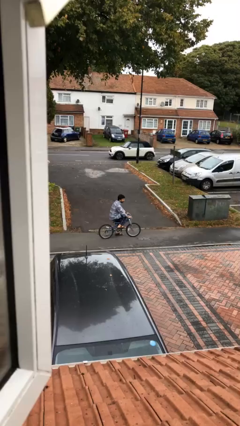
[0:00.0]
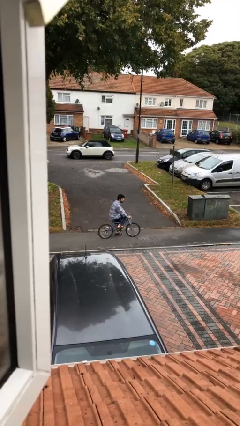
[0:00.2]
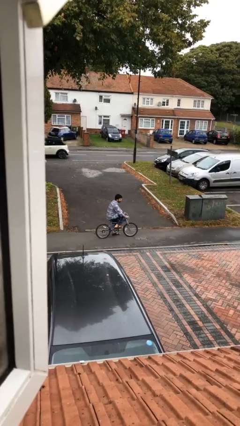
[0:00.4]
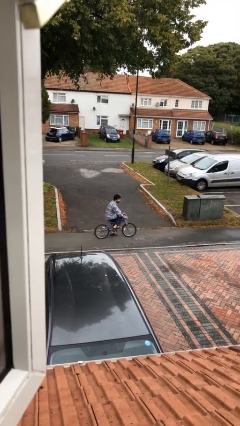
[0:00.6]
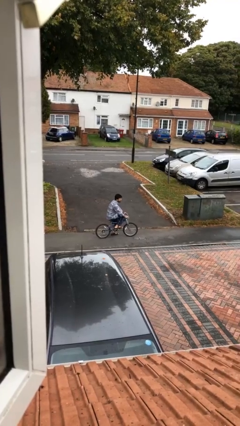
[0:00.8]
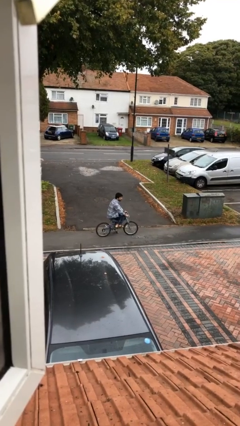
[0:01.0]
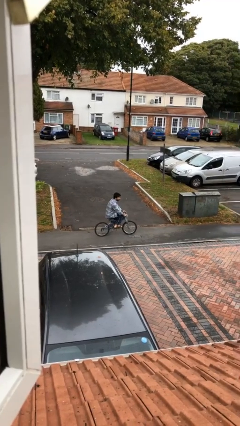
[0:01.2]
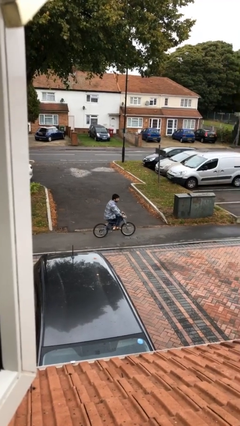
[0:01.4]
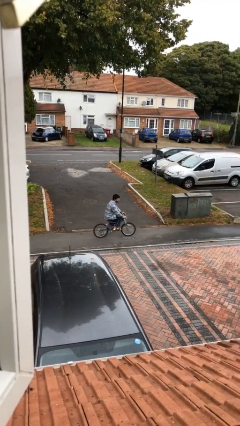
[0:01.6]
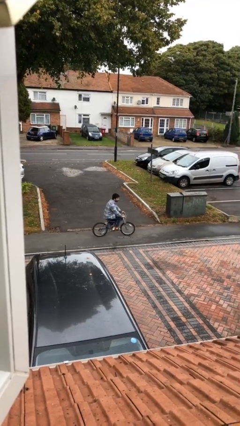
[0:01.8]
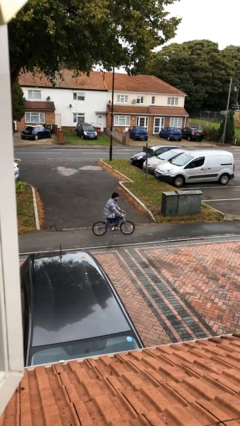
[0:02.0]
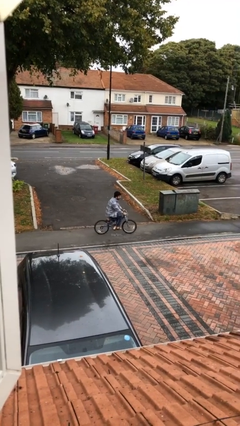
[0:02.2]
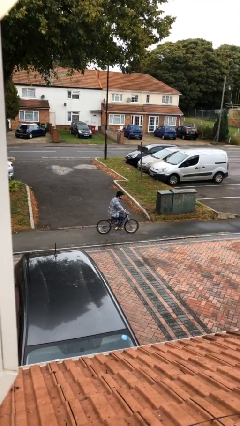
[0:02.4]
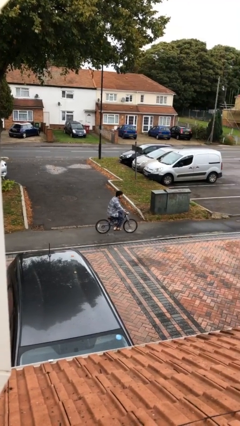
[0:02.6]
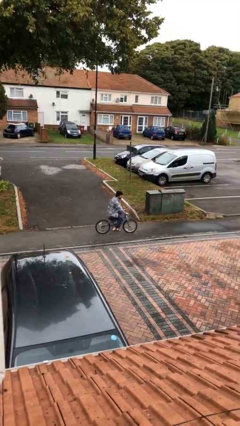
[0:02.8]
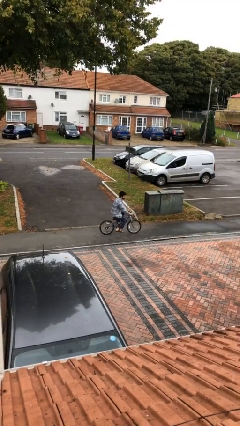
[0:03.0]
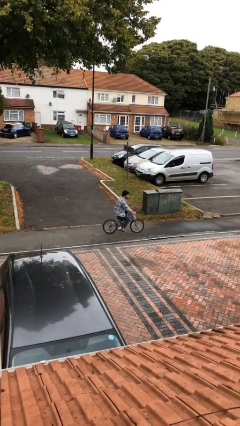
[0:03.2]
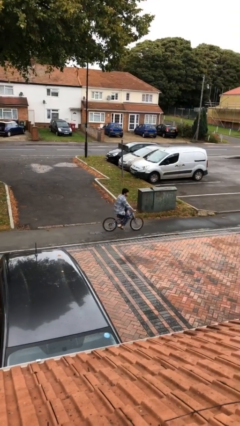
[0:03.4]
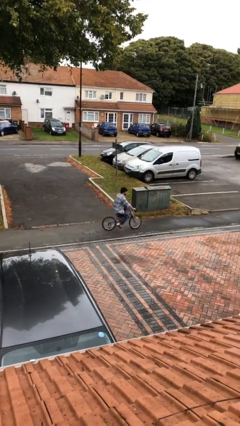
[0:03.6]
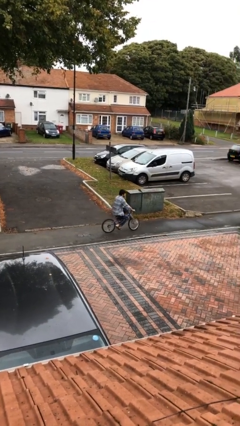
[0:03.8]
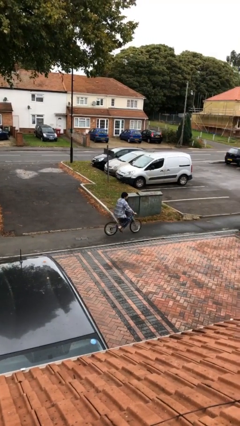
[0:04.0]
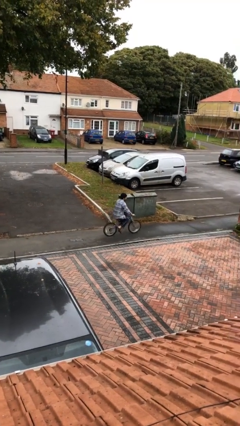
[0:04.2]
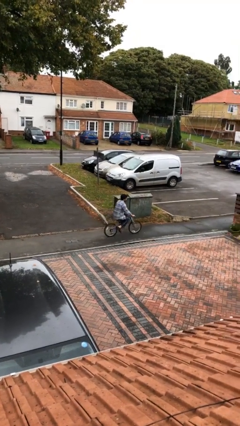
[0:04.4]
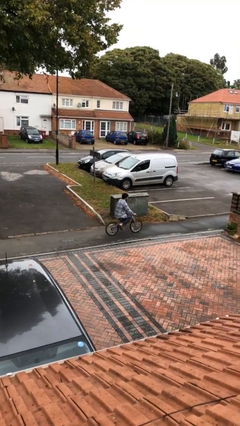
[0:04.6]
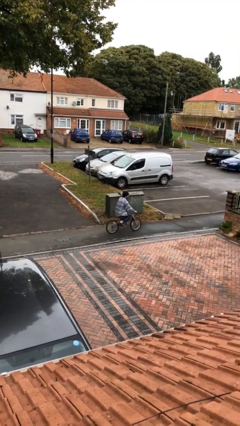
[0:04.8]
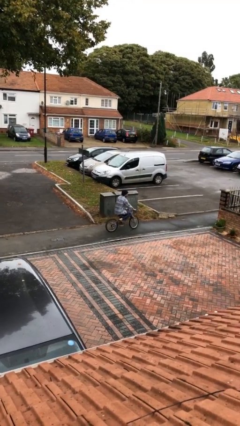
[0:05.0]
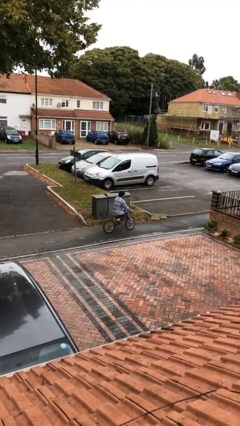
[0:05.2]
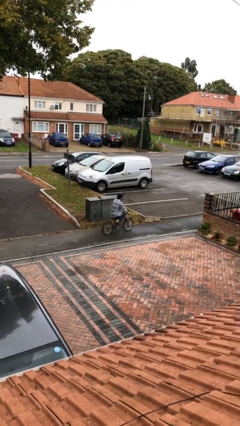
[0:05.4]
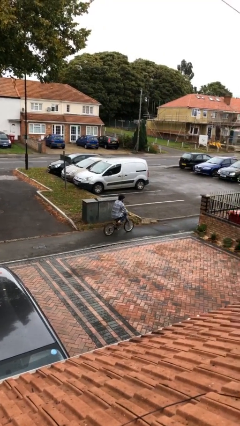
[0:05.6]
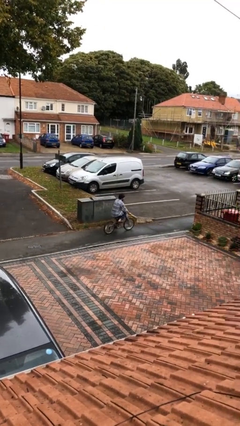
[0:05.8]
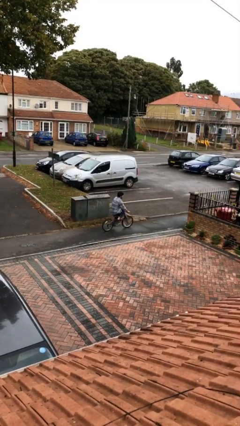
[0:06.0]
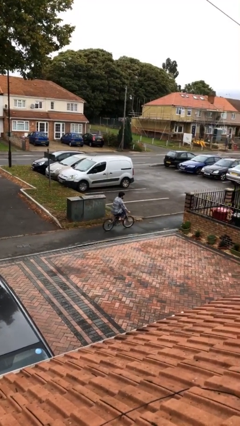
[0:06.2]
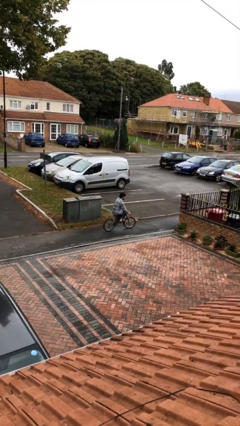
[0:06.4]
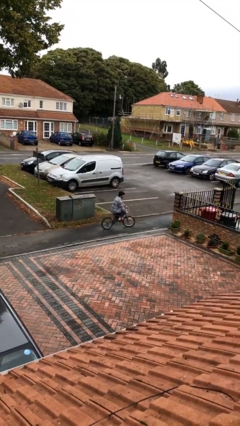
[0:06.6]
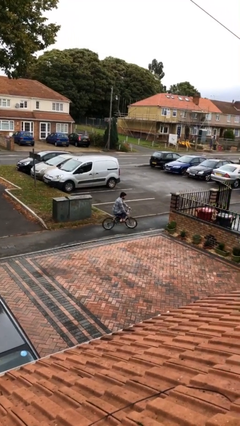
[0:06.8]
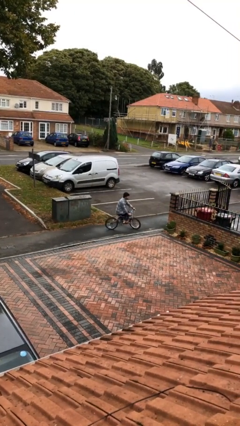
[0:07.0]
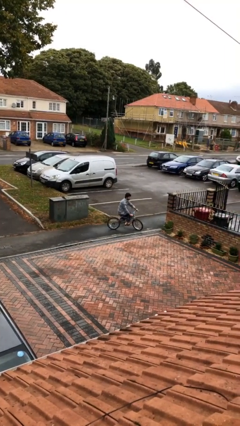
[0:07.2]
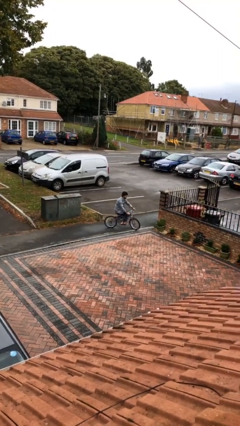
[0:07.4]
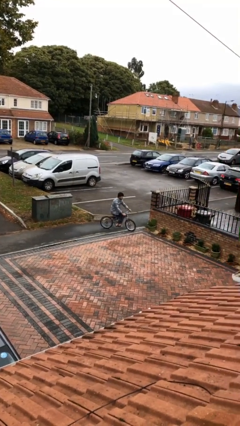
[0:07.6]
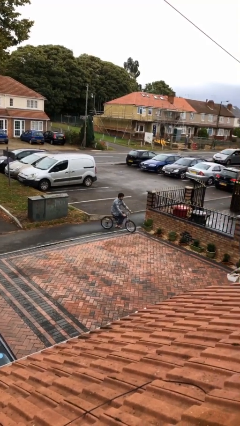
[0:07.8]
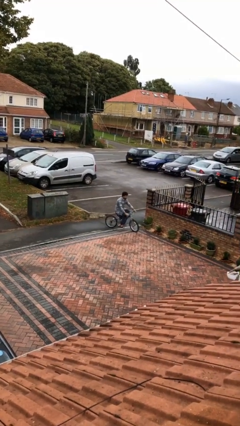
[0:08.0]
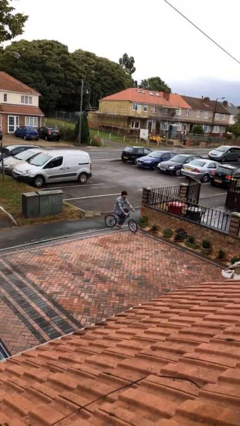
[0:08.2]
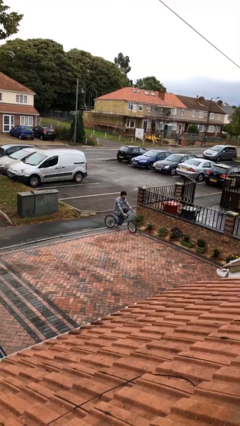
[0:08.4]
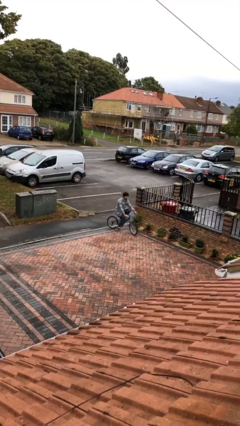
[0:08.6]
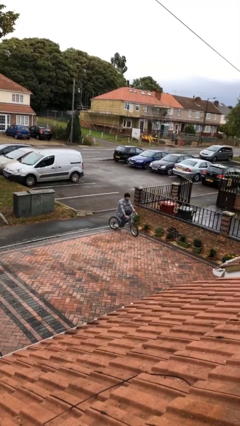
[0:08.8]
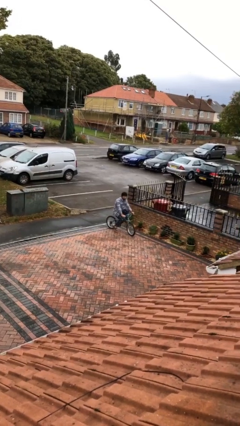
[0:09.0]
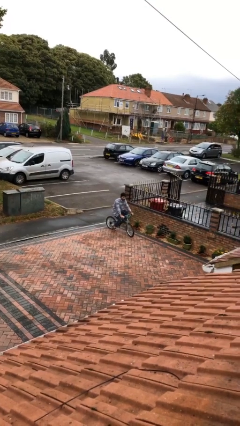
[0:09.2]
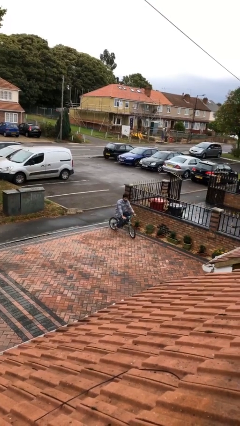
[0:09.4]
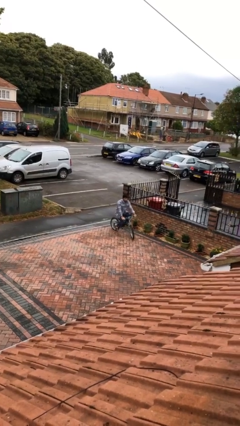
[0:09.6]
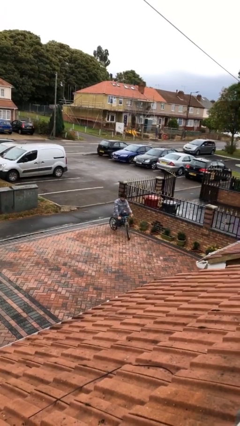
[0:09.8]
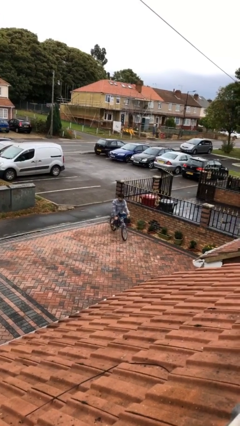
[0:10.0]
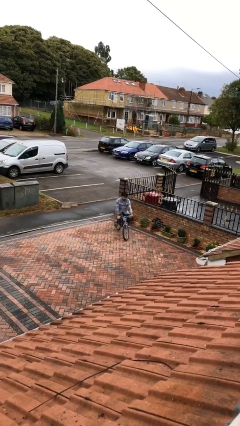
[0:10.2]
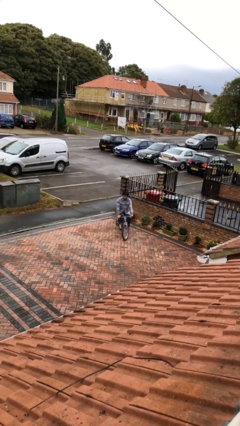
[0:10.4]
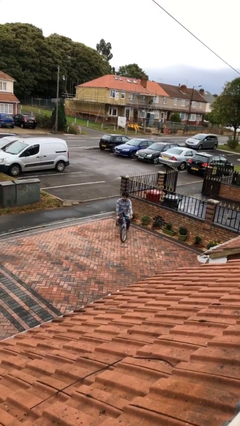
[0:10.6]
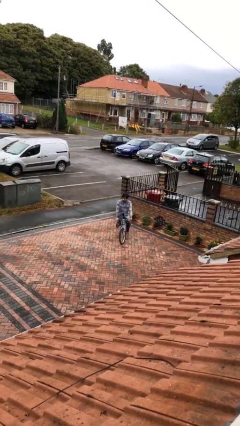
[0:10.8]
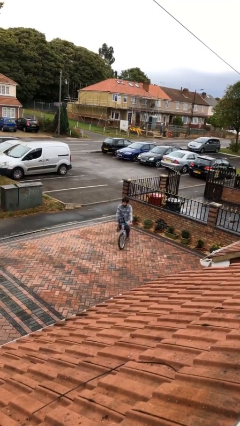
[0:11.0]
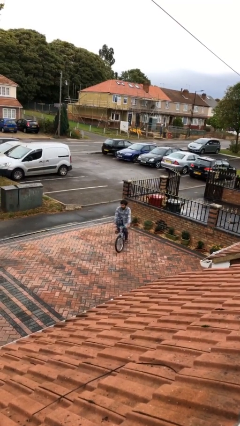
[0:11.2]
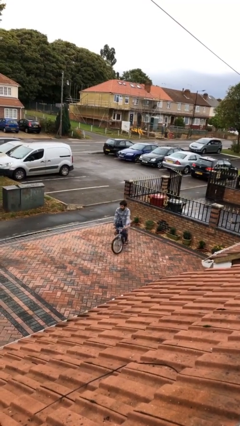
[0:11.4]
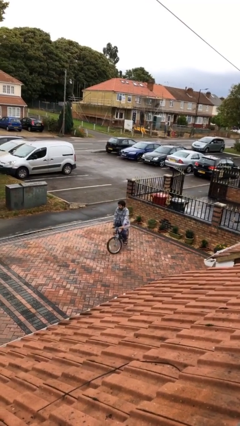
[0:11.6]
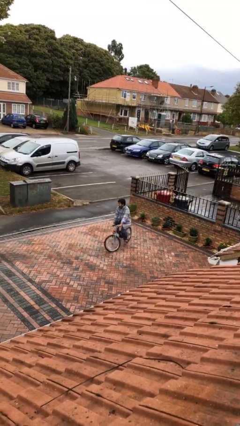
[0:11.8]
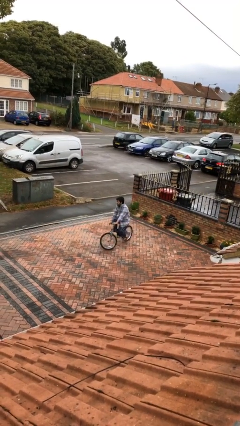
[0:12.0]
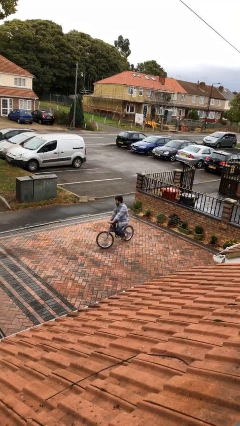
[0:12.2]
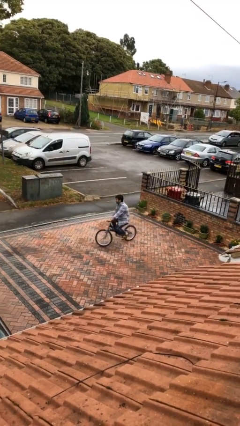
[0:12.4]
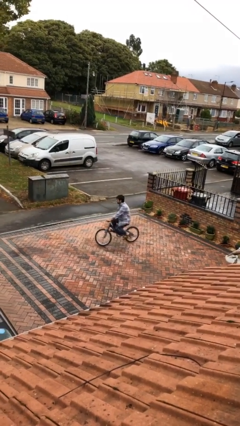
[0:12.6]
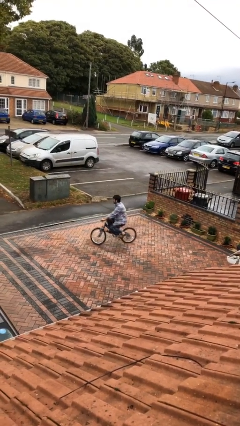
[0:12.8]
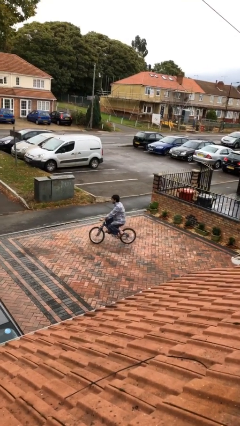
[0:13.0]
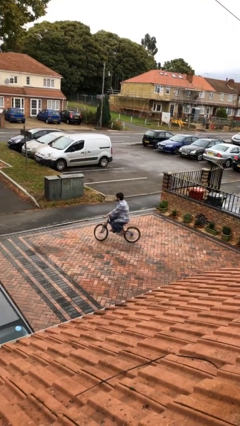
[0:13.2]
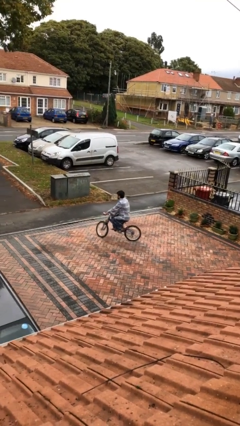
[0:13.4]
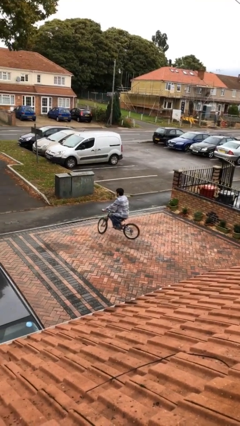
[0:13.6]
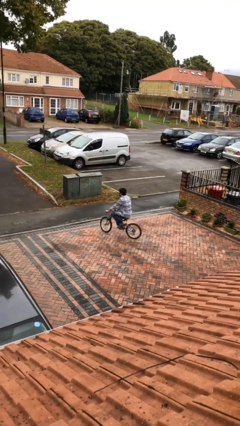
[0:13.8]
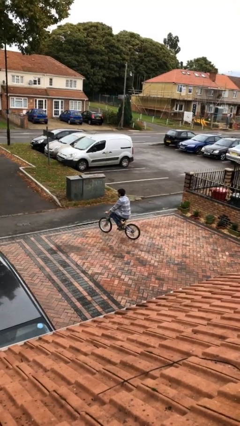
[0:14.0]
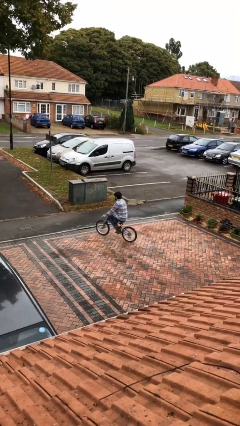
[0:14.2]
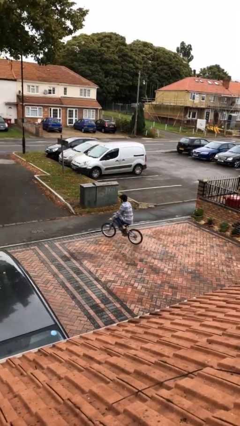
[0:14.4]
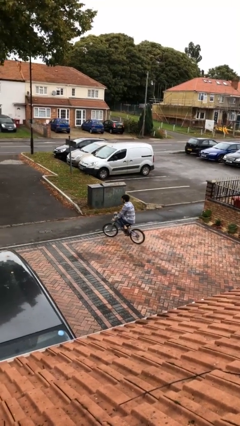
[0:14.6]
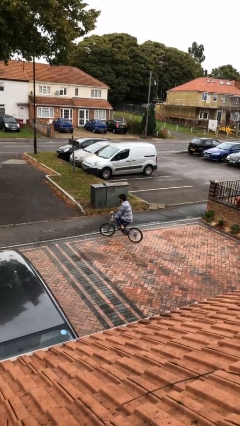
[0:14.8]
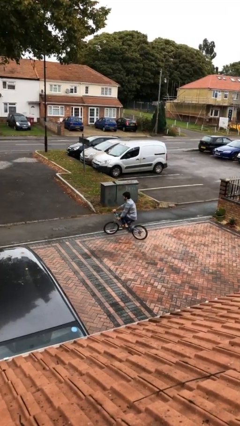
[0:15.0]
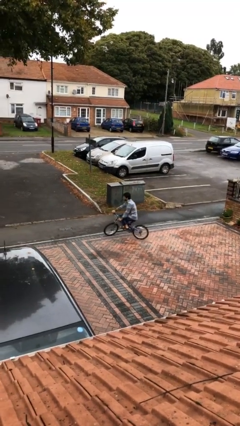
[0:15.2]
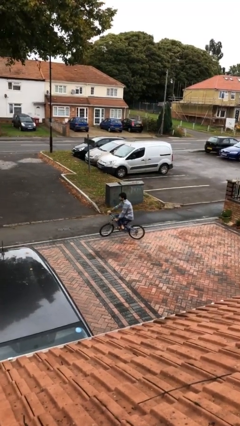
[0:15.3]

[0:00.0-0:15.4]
person rides bicycle

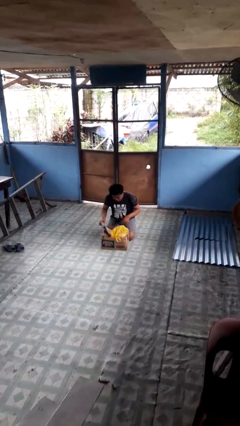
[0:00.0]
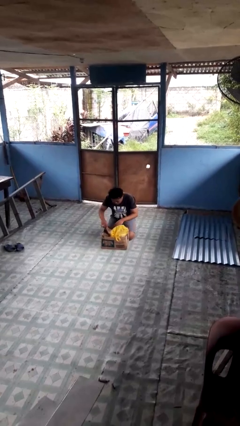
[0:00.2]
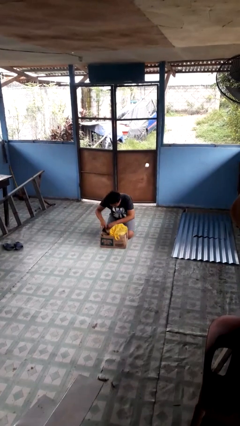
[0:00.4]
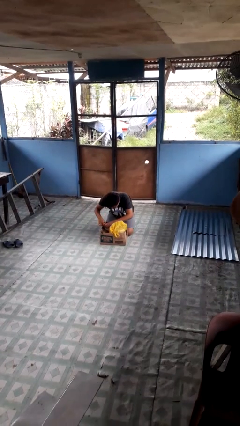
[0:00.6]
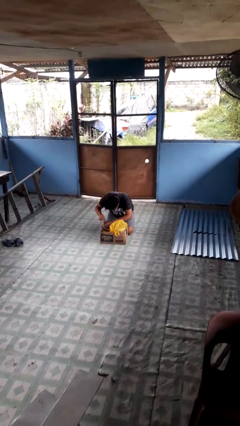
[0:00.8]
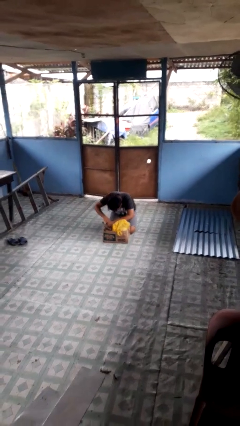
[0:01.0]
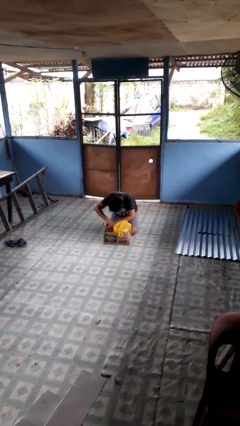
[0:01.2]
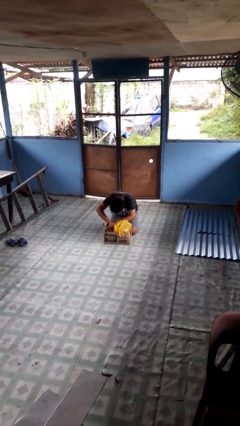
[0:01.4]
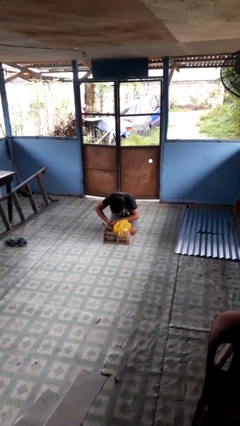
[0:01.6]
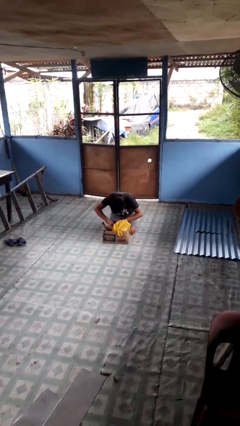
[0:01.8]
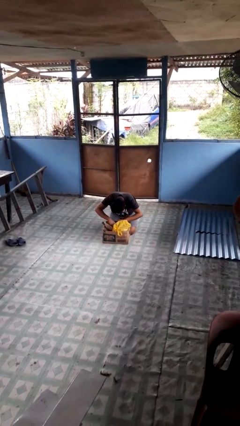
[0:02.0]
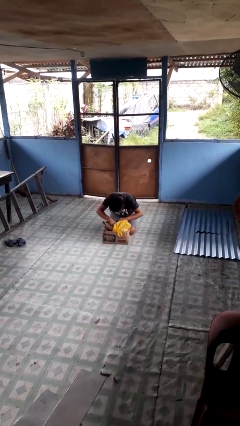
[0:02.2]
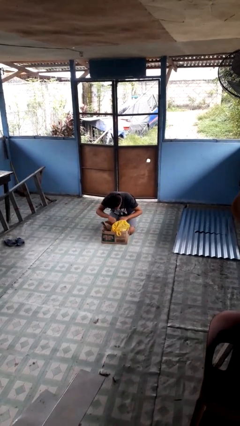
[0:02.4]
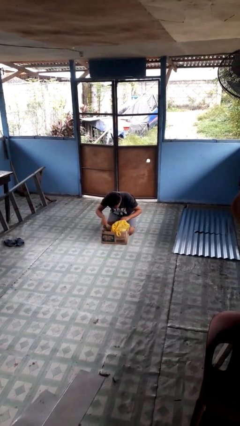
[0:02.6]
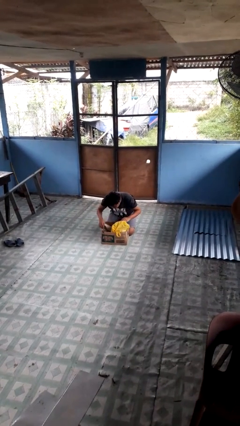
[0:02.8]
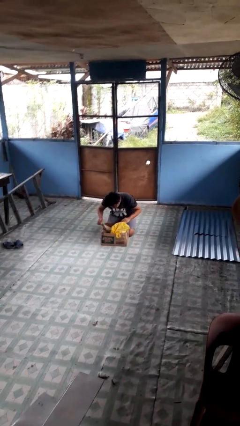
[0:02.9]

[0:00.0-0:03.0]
person searches in box
